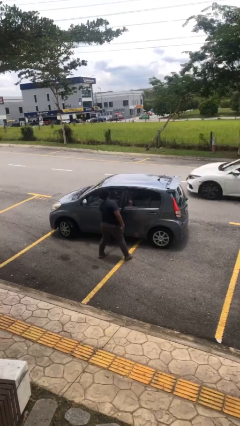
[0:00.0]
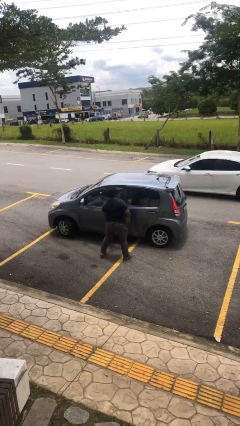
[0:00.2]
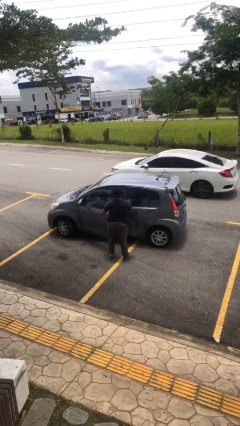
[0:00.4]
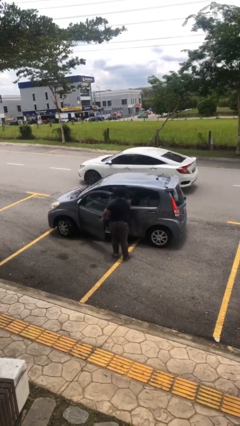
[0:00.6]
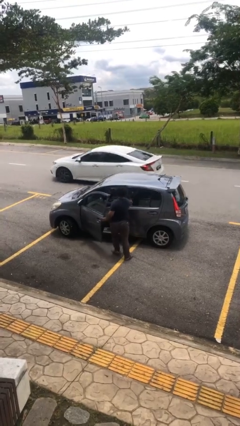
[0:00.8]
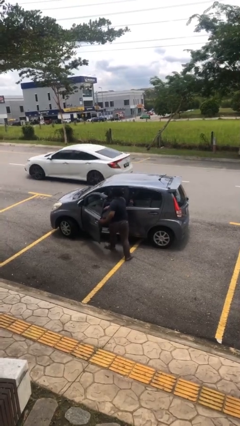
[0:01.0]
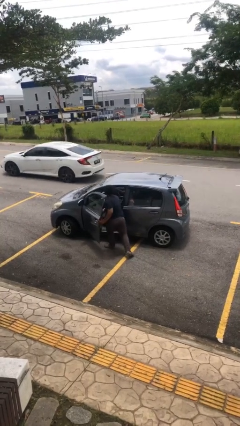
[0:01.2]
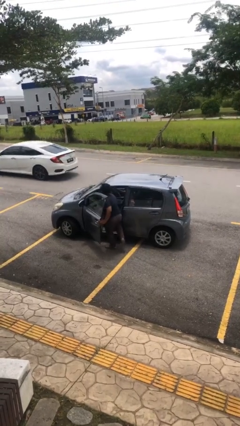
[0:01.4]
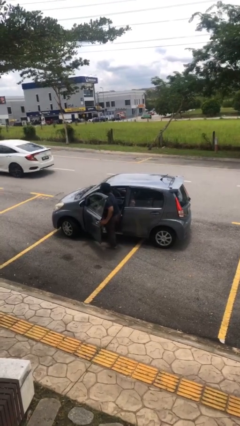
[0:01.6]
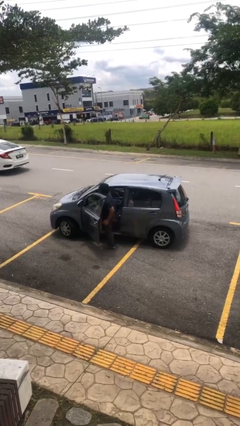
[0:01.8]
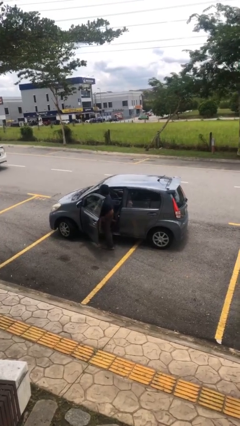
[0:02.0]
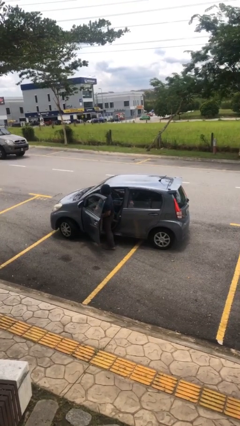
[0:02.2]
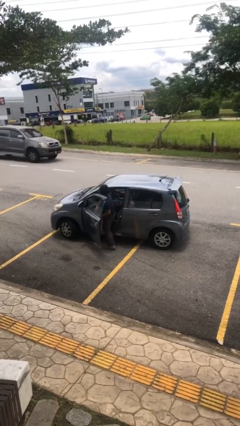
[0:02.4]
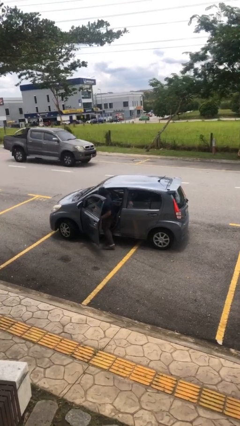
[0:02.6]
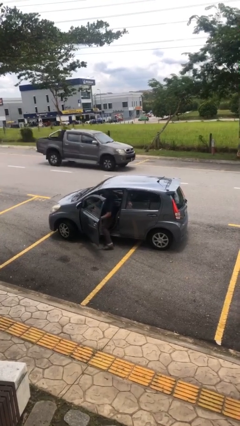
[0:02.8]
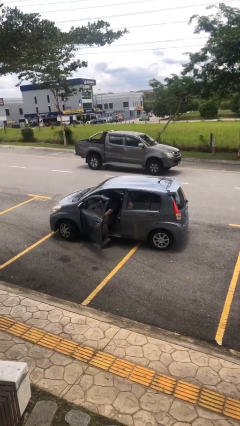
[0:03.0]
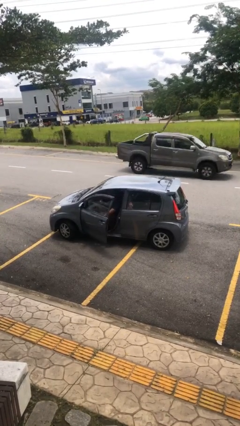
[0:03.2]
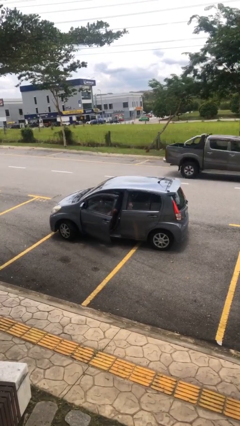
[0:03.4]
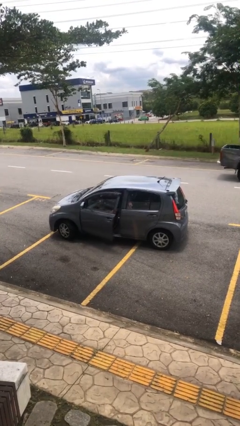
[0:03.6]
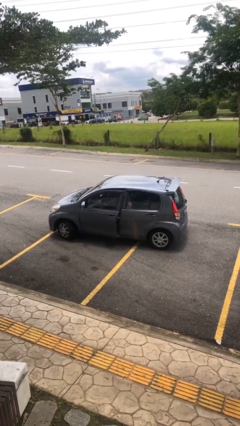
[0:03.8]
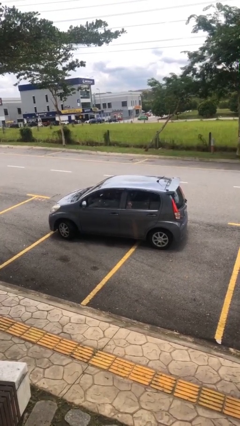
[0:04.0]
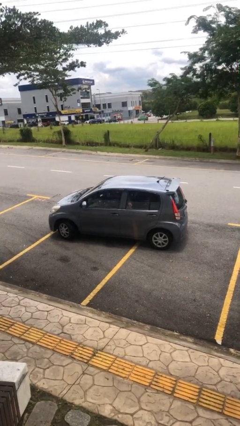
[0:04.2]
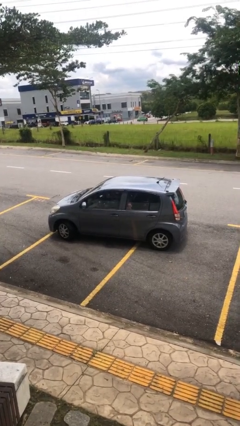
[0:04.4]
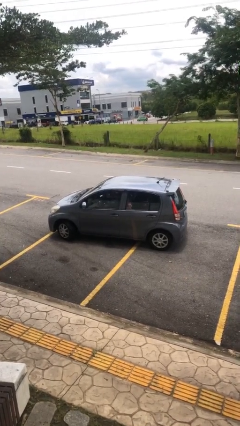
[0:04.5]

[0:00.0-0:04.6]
car picks up person

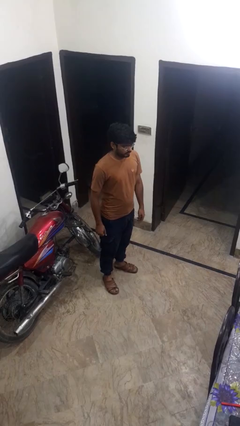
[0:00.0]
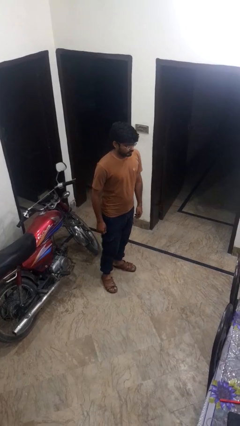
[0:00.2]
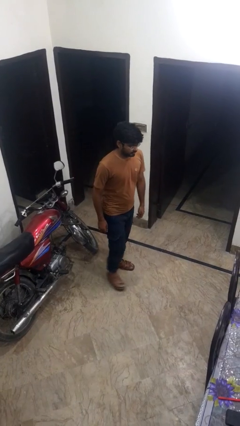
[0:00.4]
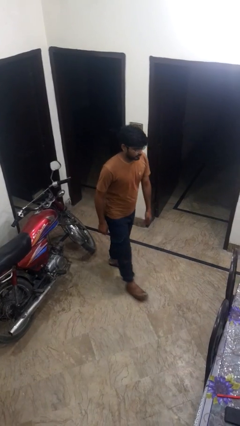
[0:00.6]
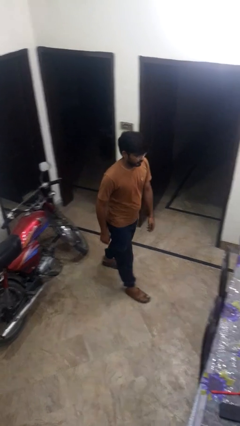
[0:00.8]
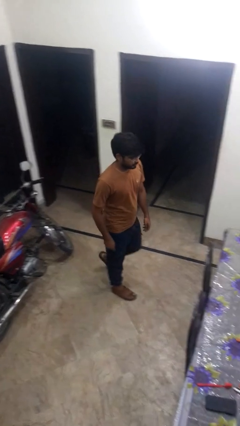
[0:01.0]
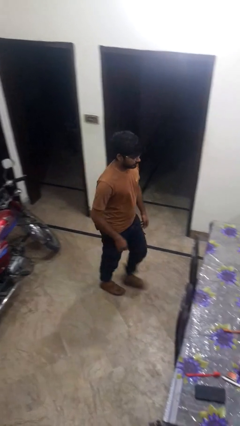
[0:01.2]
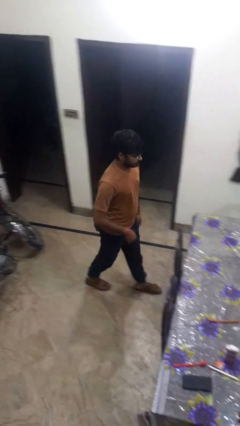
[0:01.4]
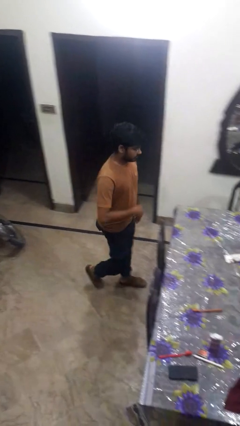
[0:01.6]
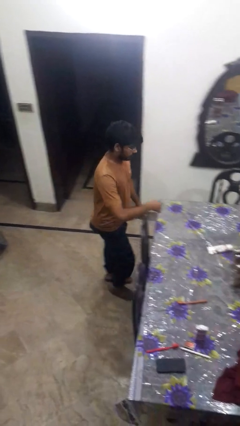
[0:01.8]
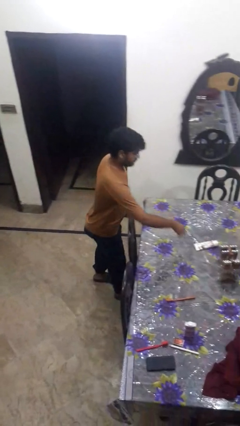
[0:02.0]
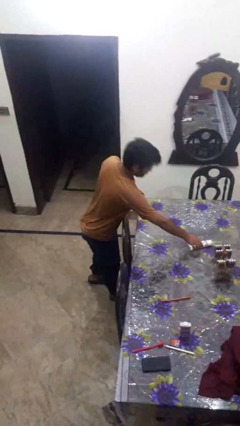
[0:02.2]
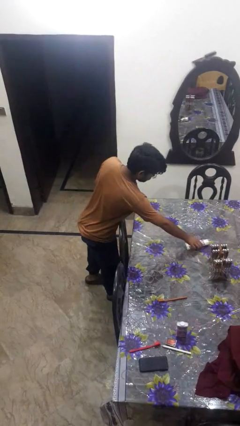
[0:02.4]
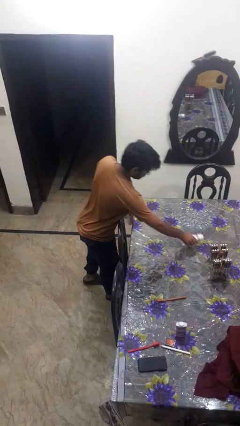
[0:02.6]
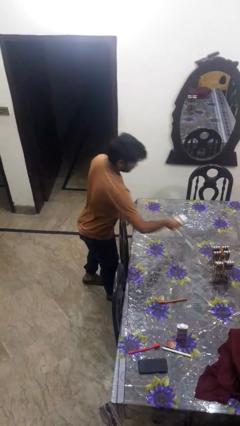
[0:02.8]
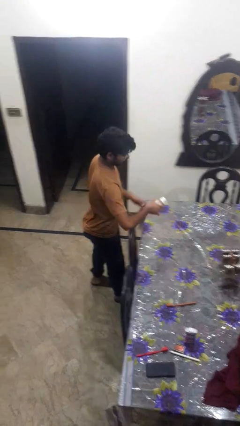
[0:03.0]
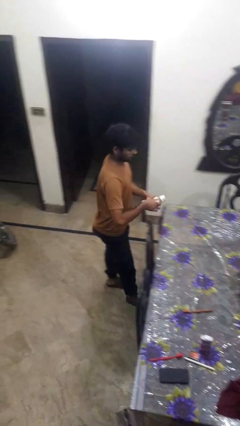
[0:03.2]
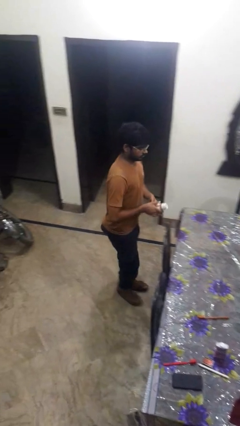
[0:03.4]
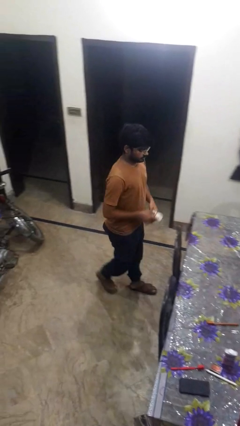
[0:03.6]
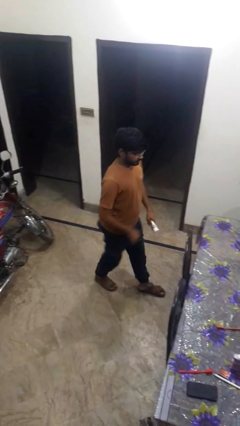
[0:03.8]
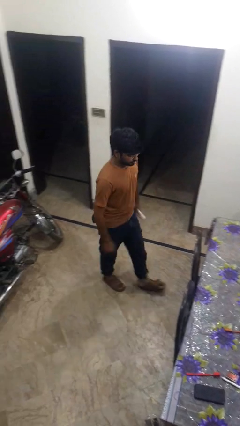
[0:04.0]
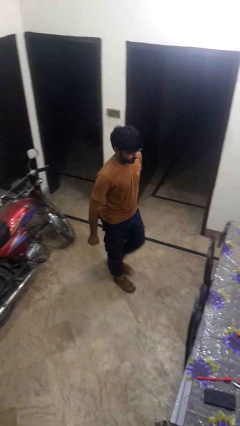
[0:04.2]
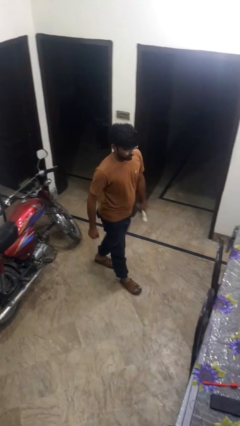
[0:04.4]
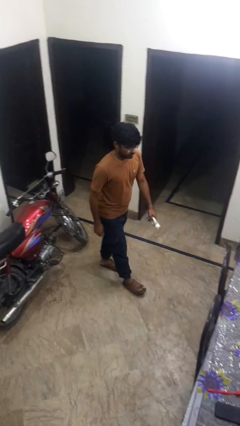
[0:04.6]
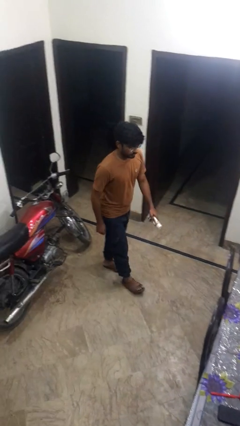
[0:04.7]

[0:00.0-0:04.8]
person picks up object from table

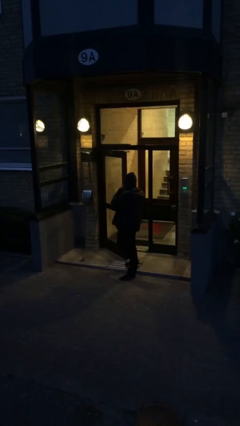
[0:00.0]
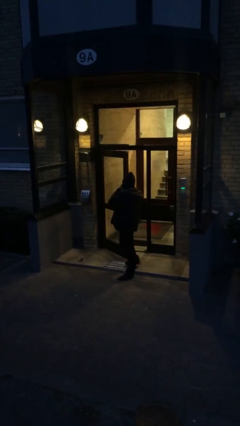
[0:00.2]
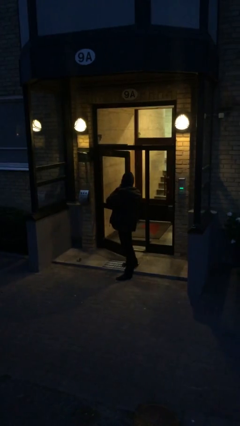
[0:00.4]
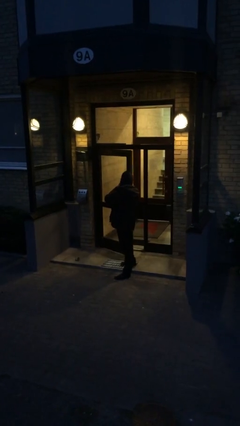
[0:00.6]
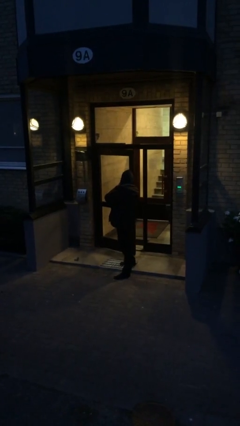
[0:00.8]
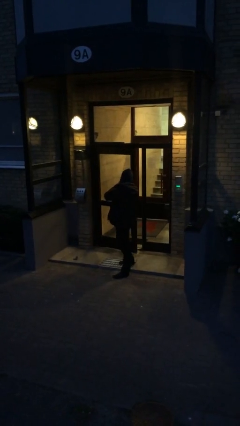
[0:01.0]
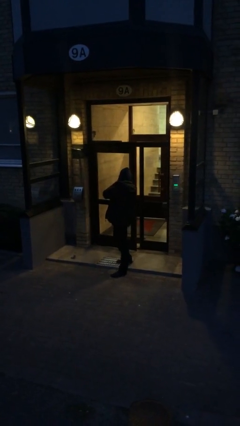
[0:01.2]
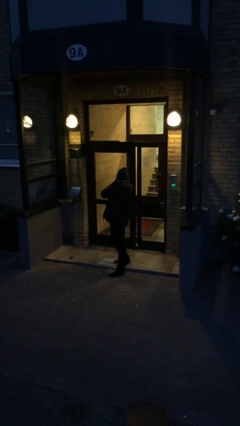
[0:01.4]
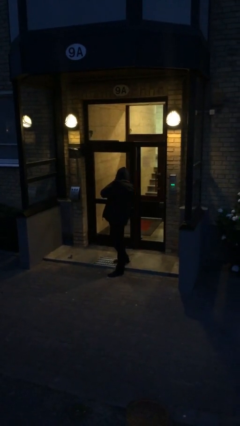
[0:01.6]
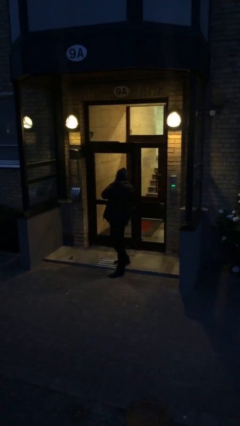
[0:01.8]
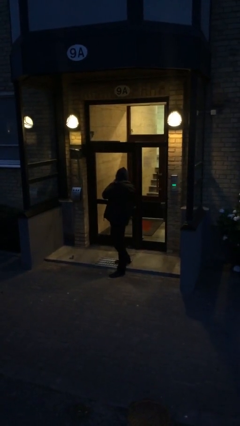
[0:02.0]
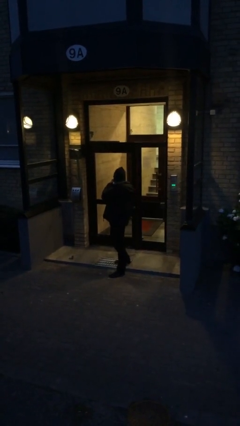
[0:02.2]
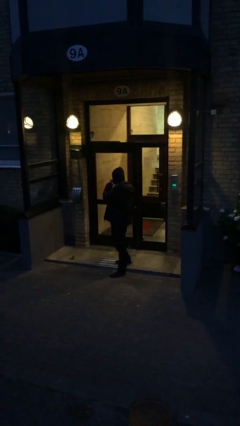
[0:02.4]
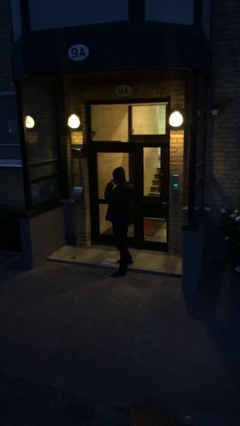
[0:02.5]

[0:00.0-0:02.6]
person closes facility door

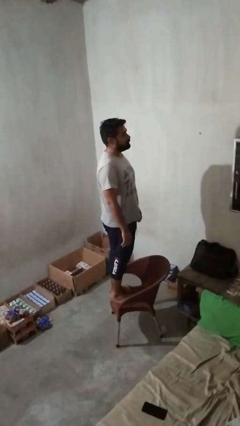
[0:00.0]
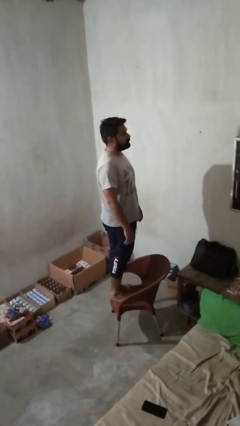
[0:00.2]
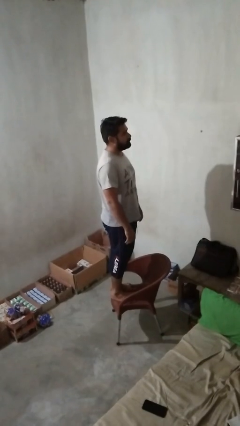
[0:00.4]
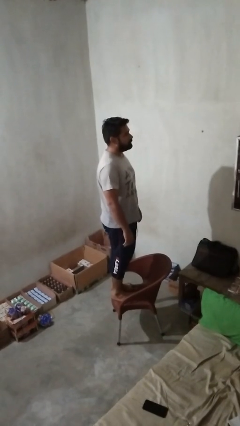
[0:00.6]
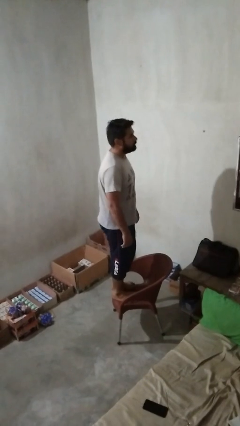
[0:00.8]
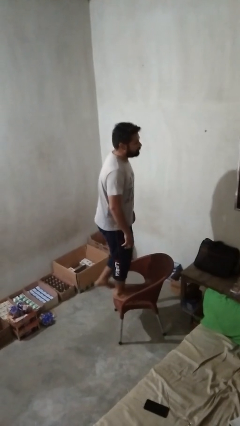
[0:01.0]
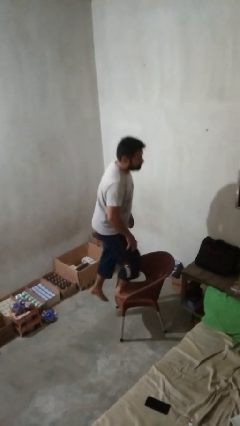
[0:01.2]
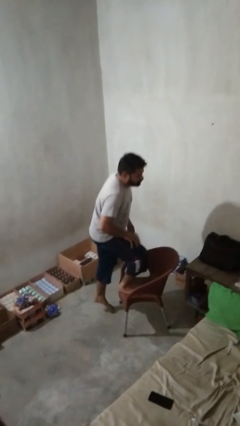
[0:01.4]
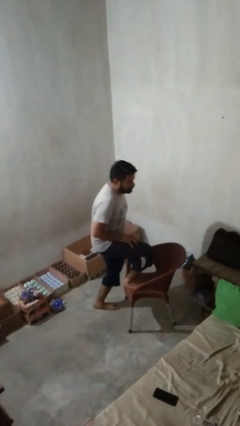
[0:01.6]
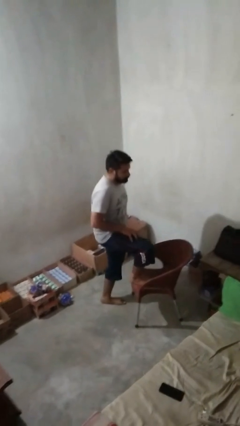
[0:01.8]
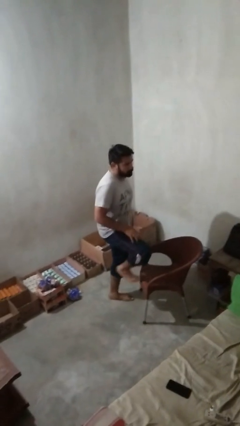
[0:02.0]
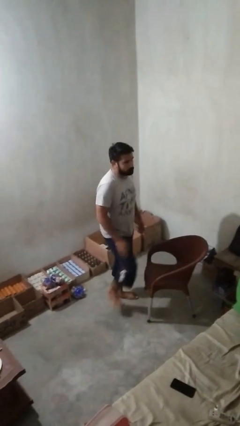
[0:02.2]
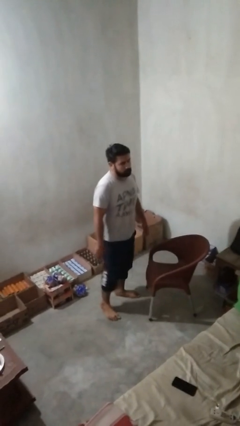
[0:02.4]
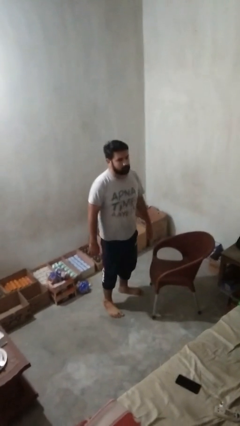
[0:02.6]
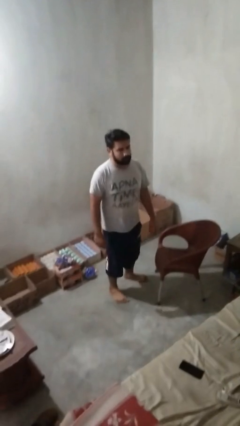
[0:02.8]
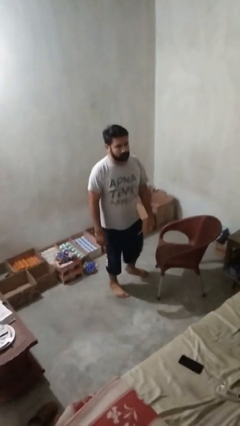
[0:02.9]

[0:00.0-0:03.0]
person climbs off chair

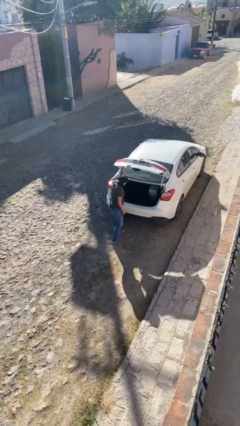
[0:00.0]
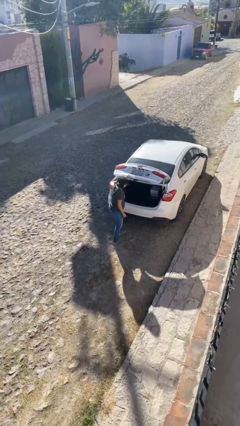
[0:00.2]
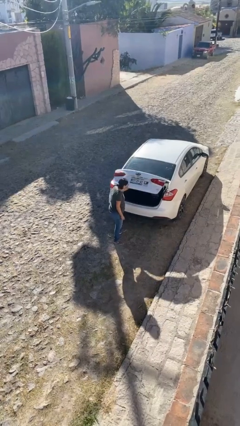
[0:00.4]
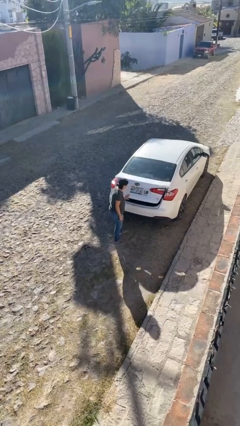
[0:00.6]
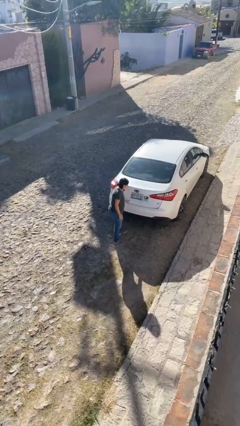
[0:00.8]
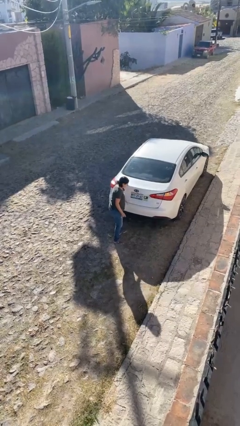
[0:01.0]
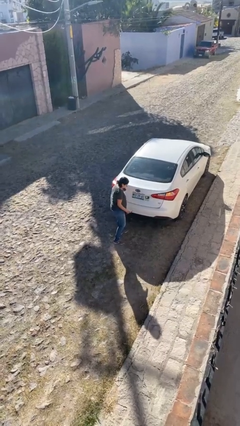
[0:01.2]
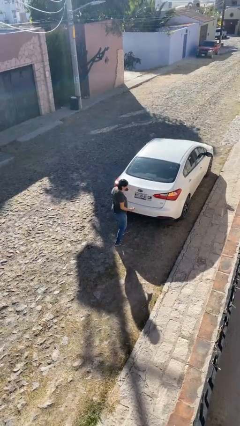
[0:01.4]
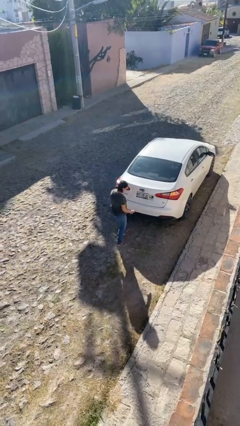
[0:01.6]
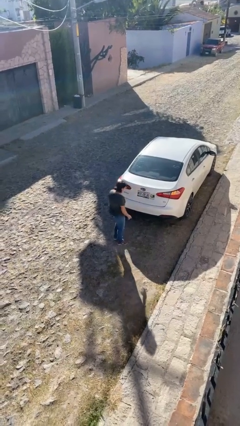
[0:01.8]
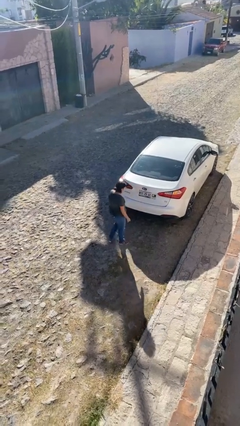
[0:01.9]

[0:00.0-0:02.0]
person closes car trunk

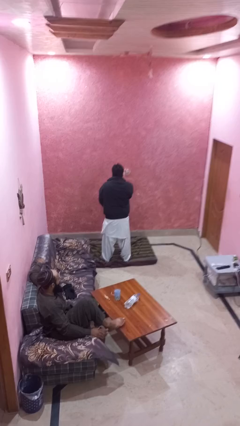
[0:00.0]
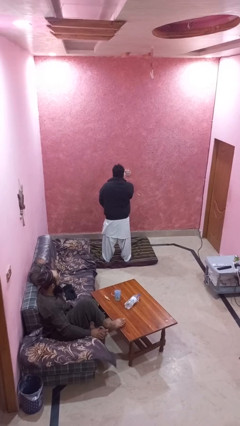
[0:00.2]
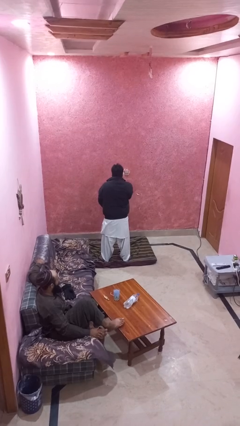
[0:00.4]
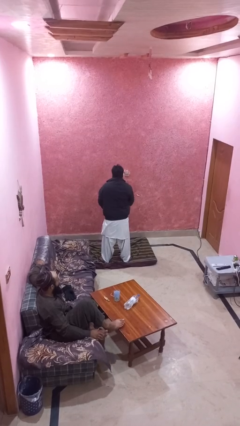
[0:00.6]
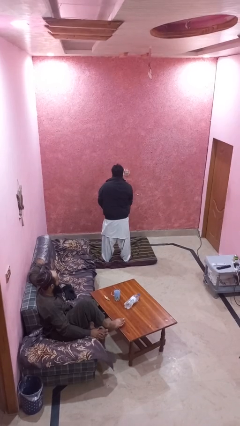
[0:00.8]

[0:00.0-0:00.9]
person unzips jacket
